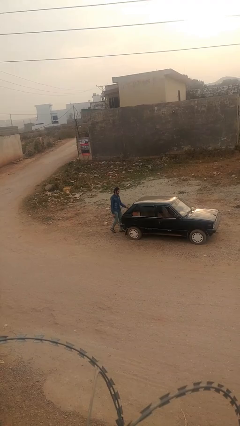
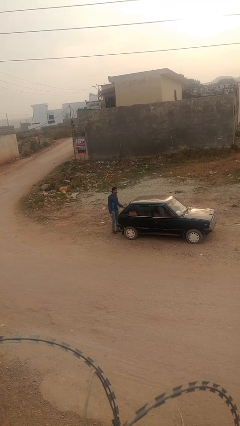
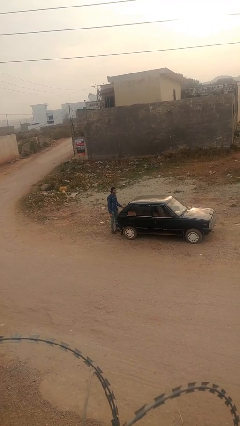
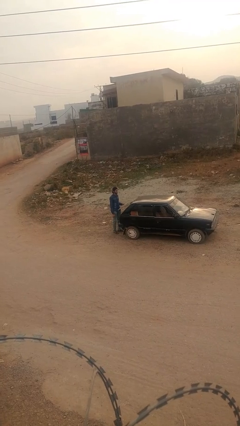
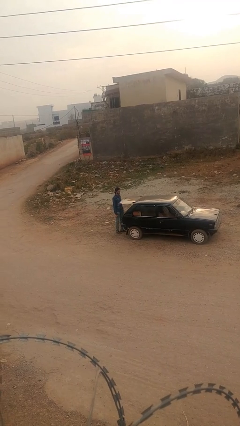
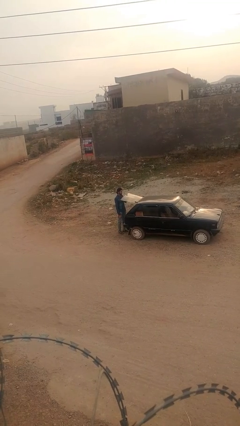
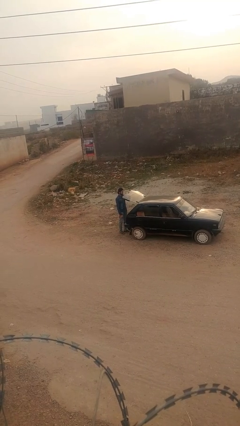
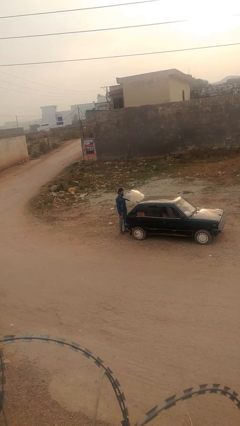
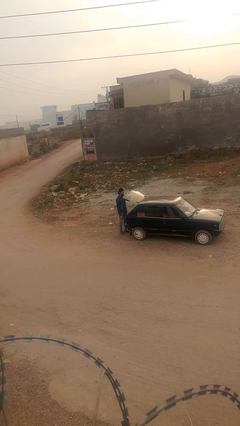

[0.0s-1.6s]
person opens car trunk

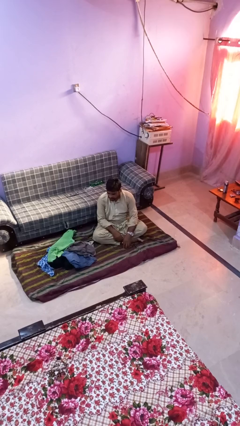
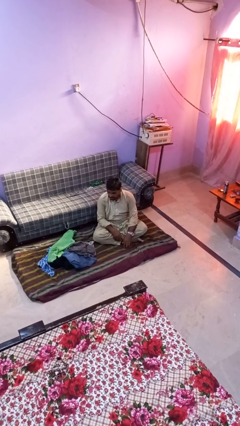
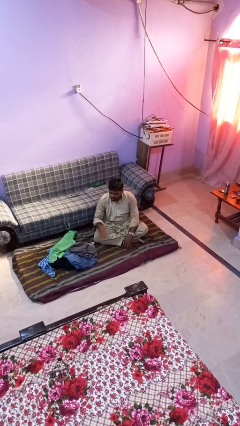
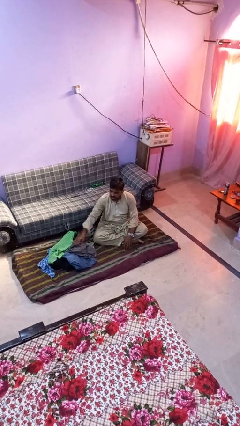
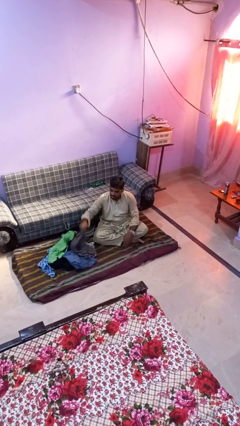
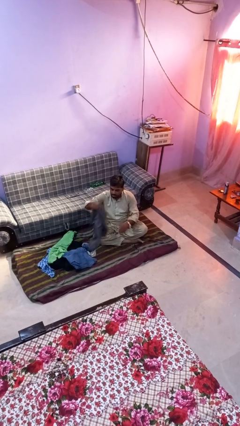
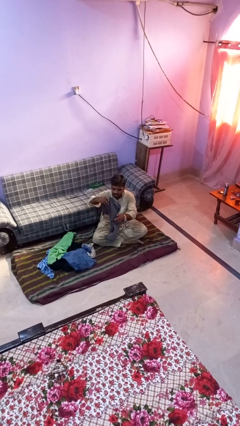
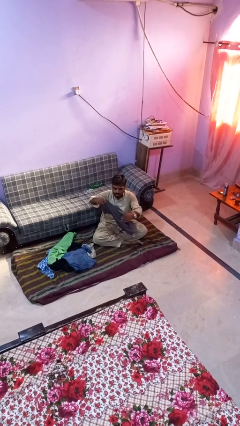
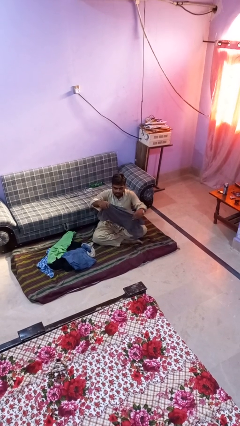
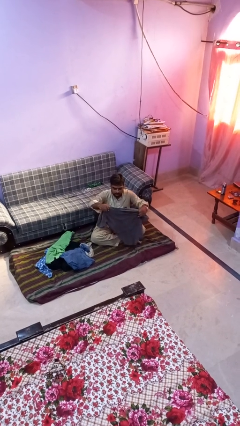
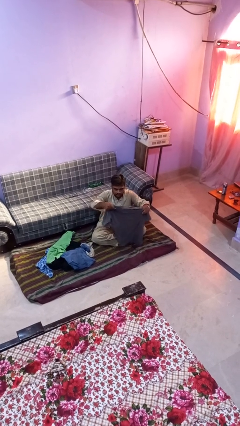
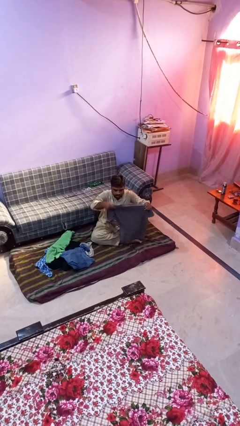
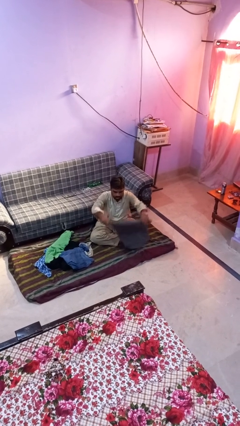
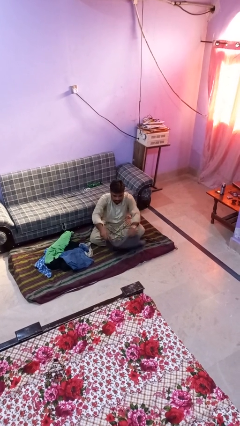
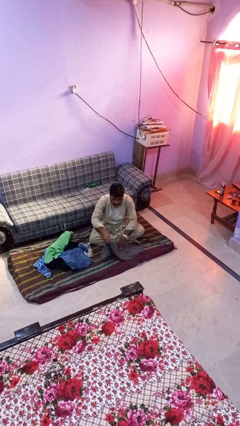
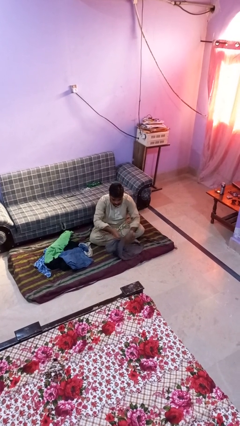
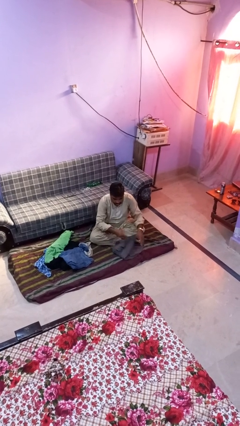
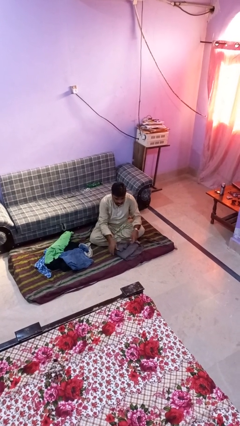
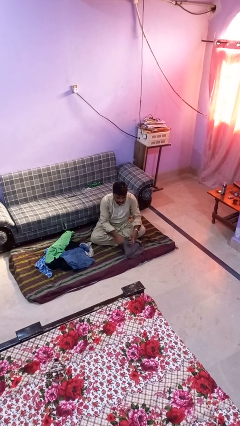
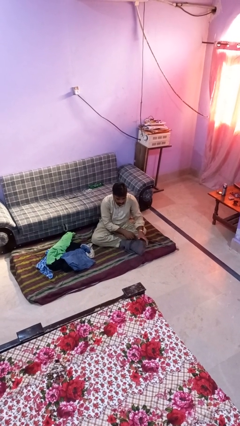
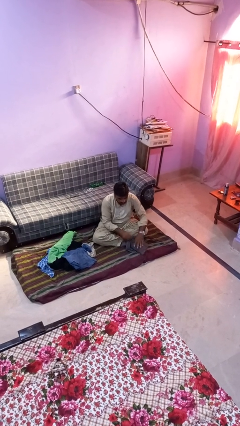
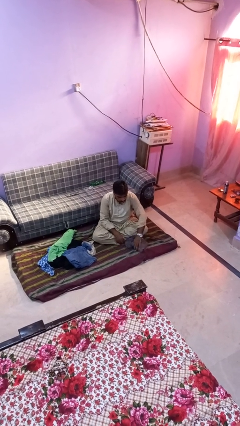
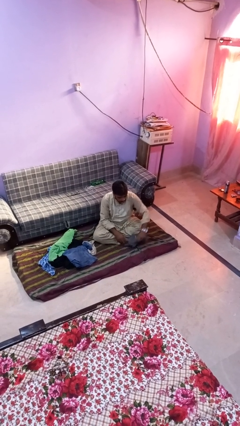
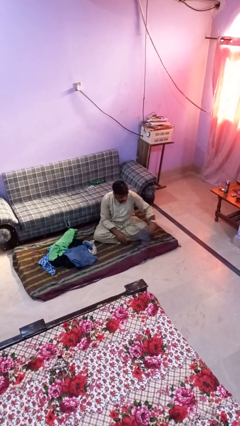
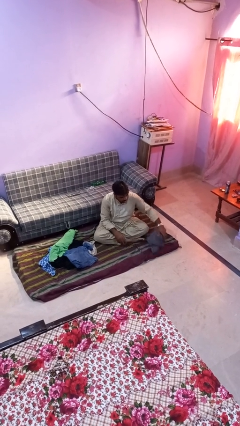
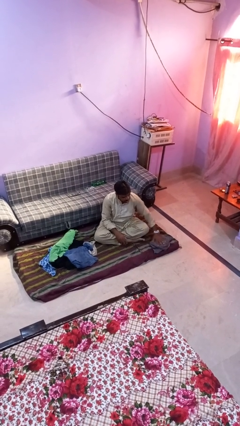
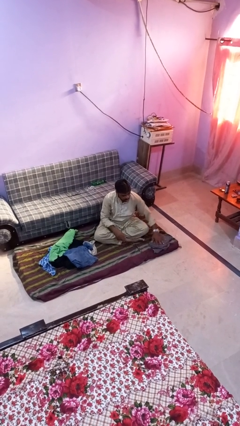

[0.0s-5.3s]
person folds shirt

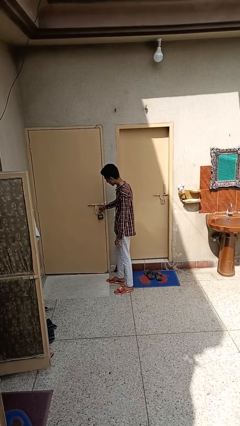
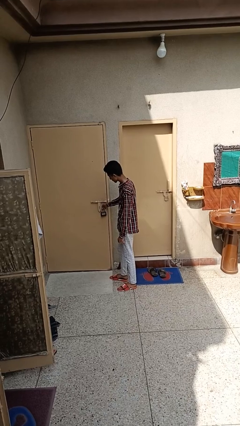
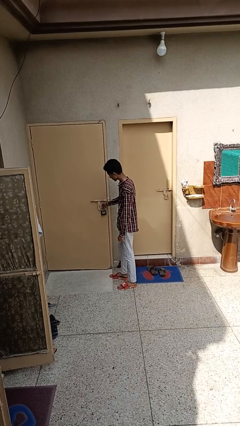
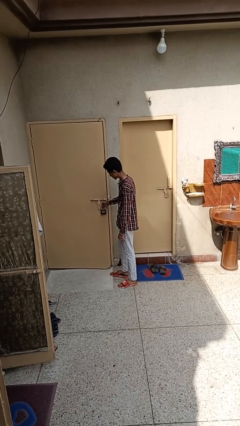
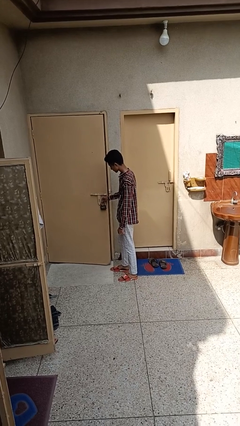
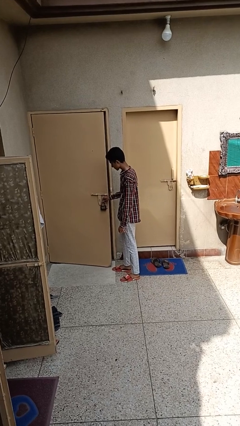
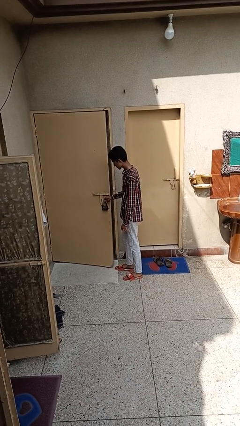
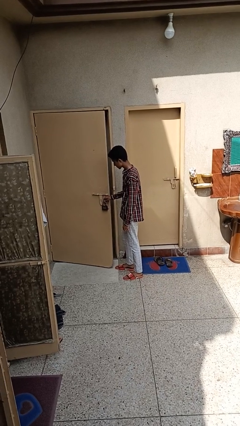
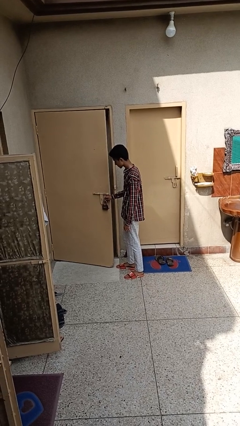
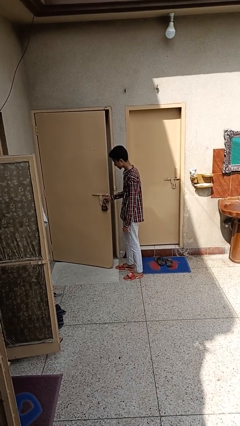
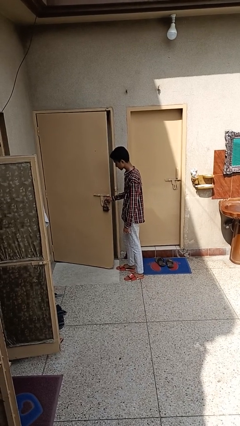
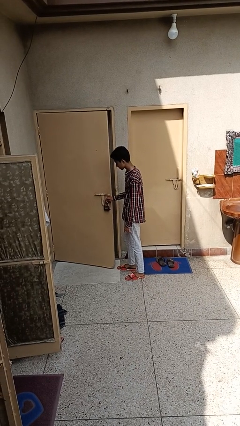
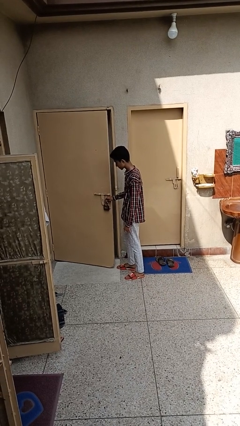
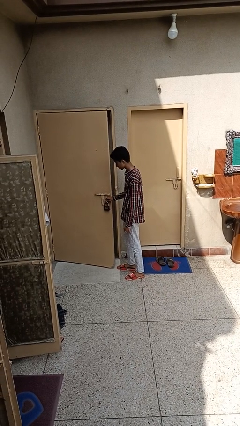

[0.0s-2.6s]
person opens facility door

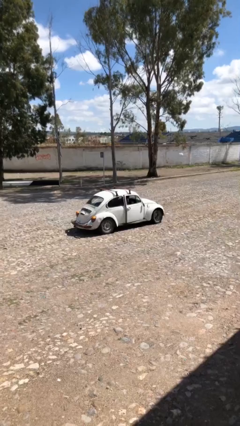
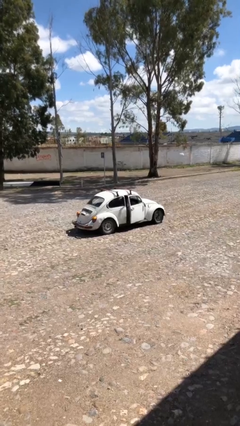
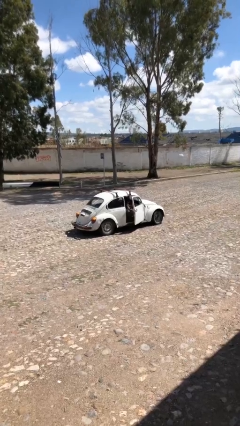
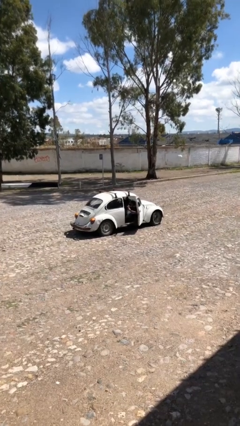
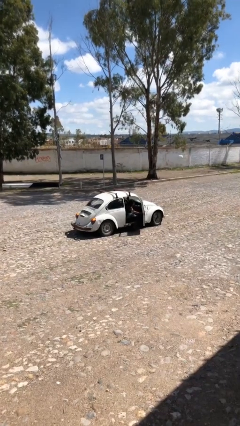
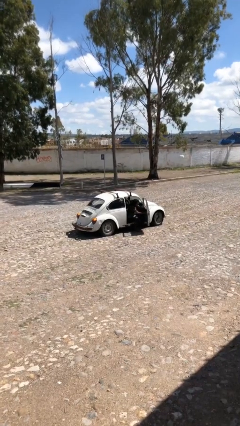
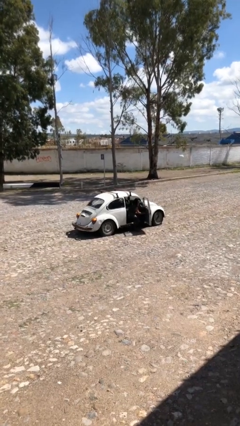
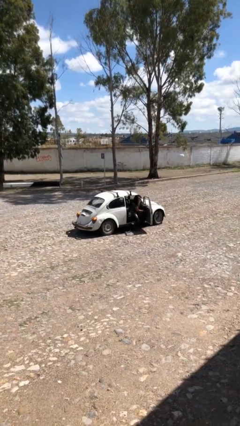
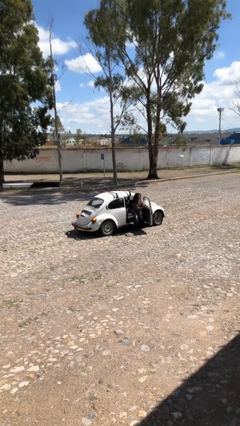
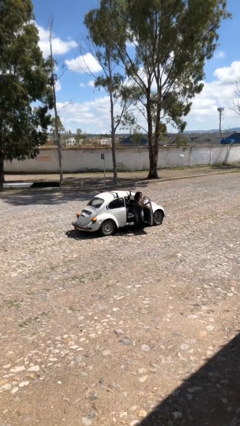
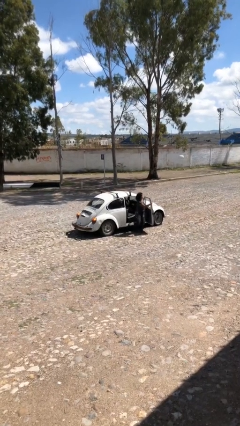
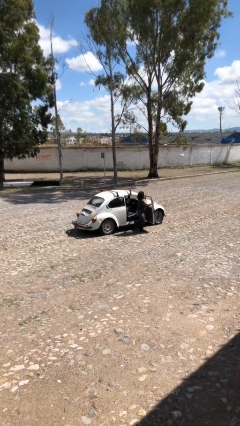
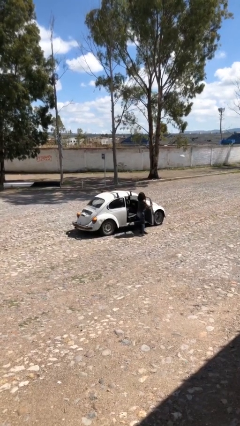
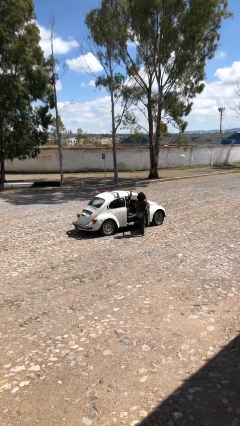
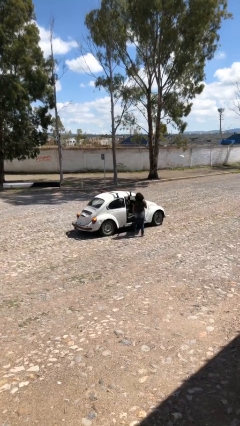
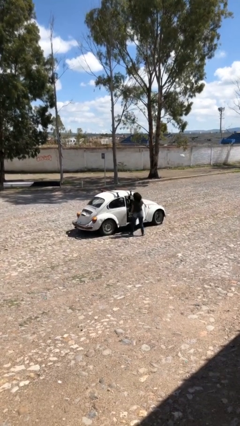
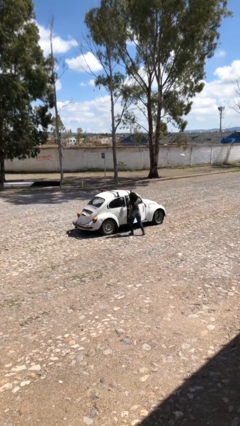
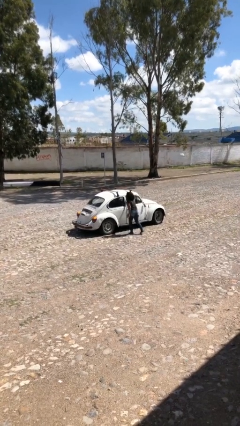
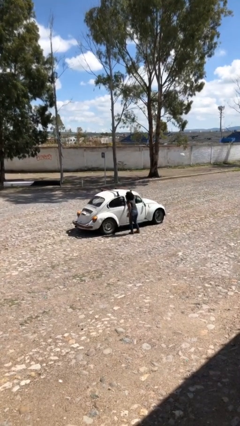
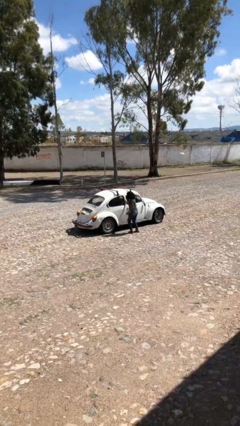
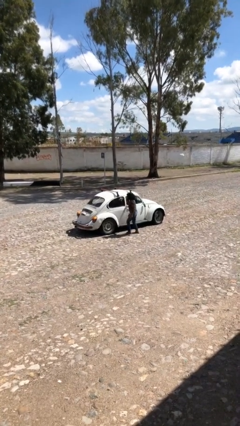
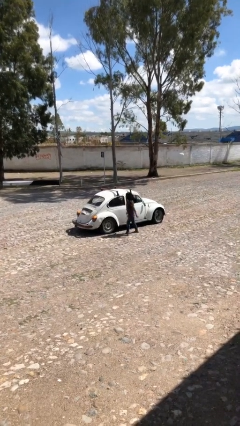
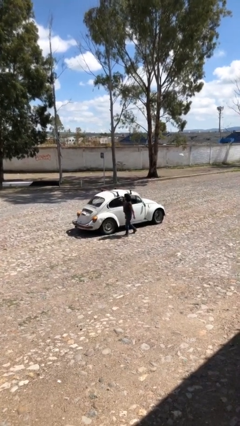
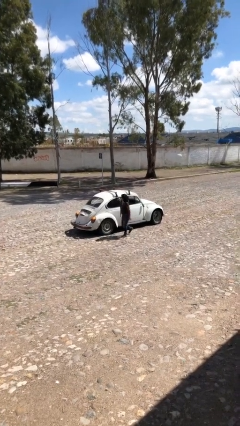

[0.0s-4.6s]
car drops off person

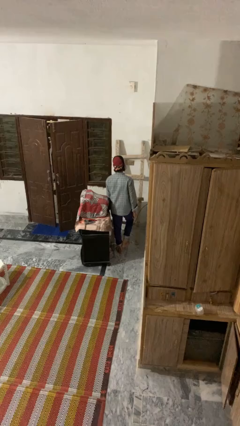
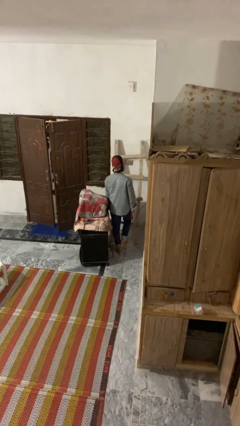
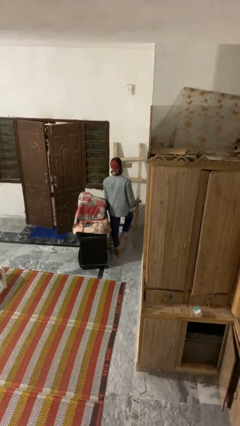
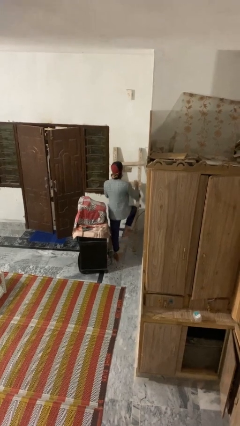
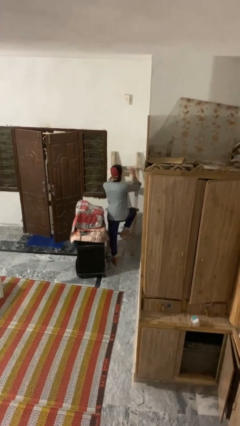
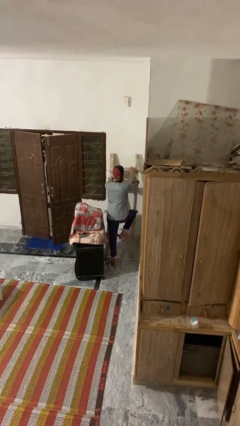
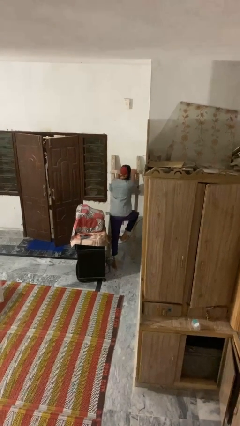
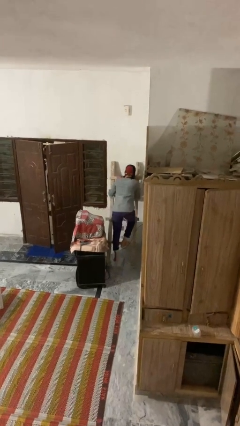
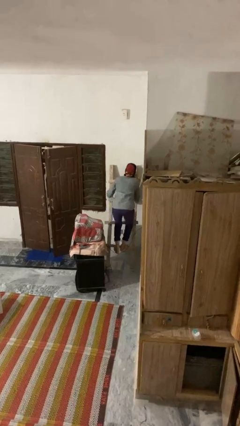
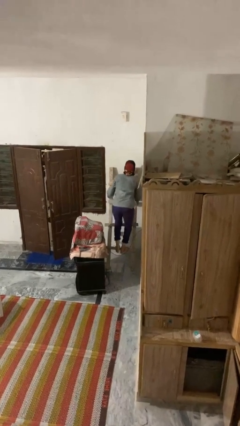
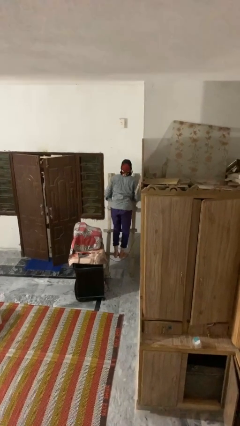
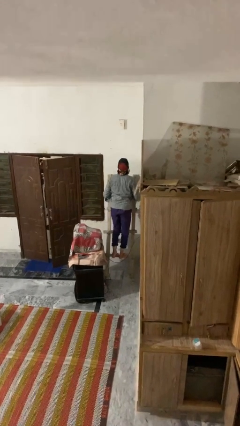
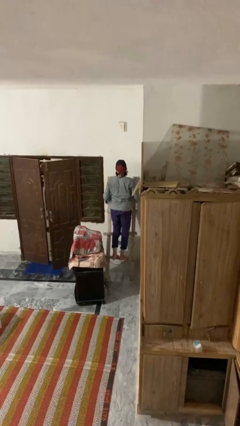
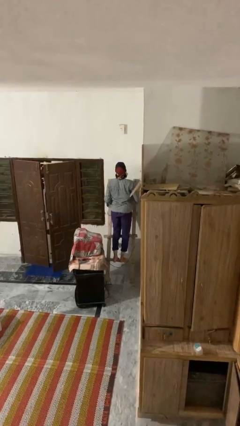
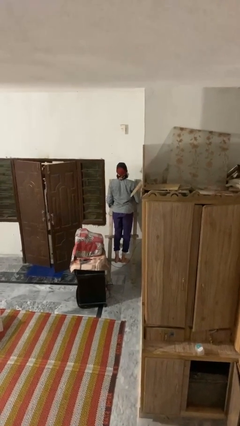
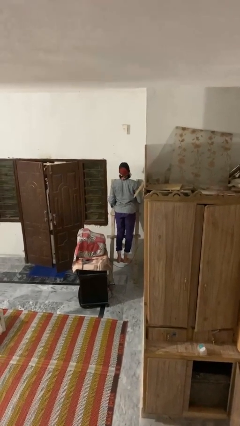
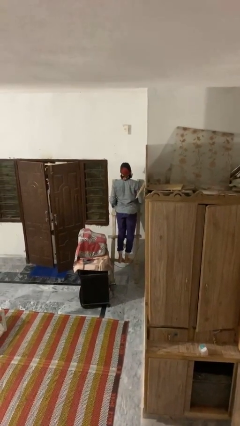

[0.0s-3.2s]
person climbs up ladder

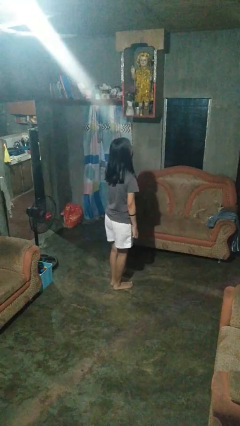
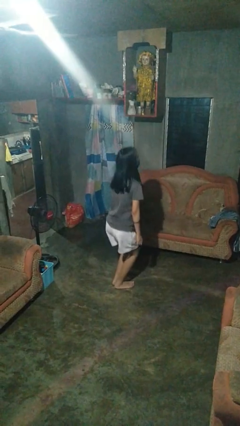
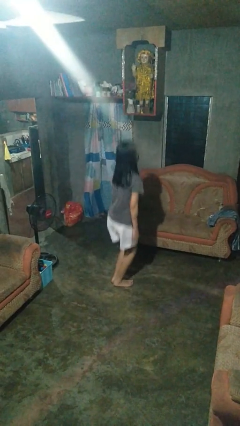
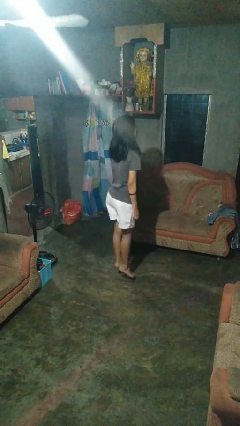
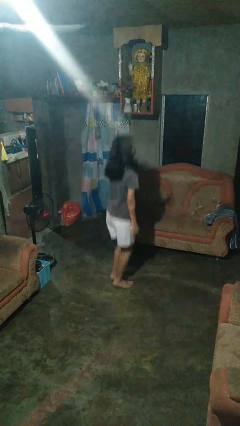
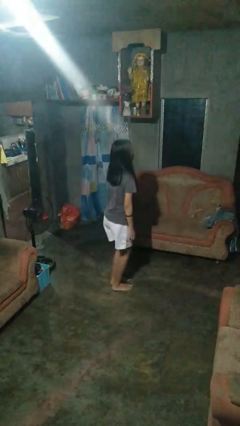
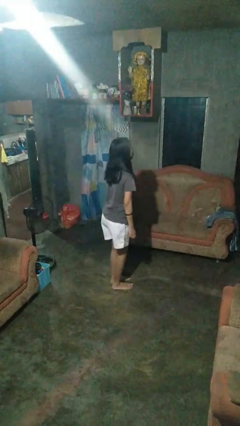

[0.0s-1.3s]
person jumps
